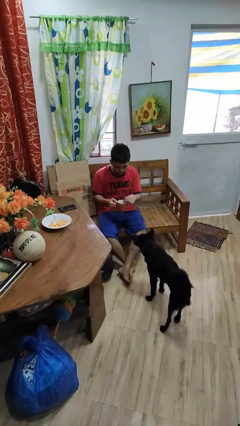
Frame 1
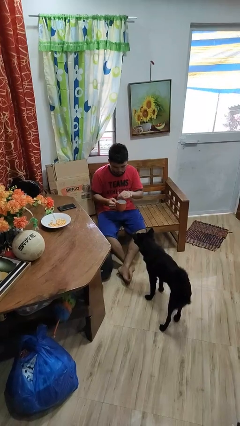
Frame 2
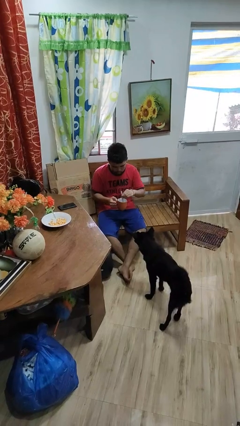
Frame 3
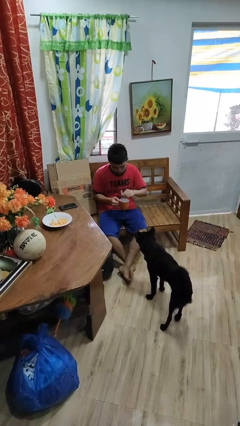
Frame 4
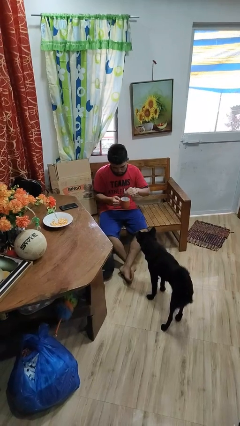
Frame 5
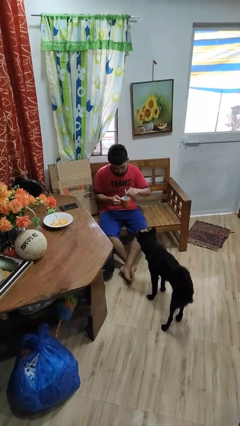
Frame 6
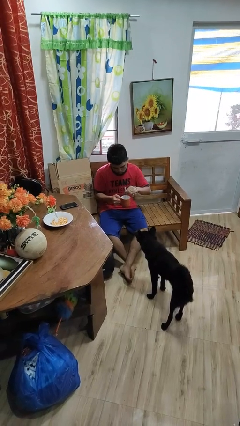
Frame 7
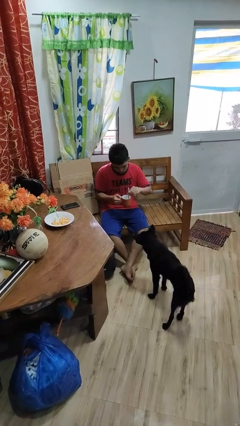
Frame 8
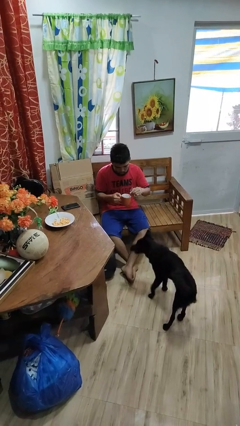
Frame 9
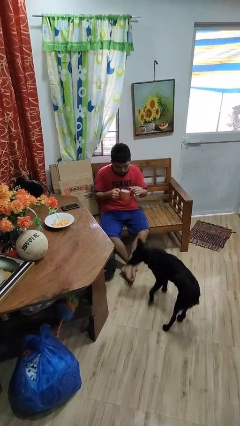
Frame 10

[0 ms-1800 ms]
person stirs mug

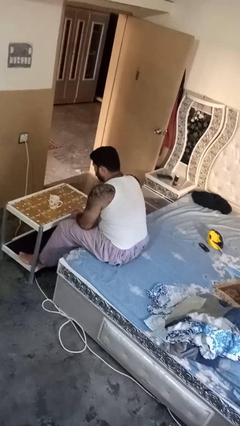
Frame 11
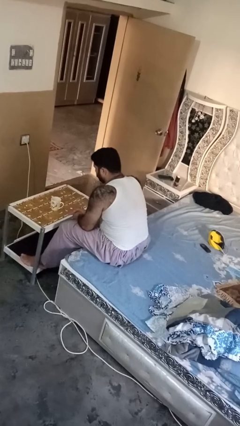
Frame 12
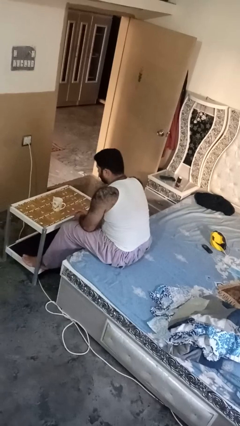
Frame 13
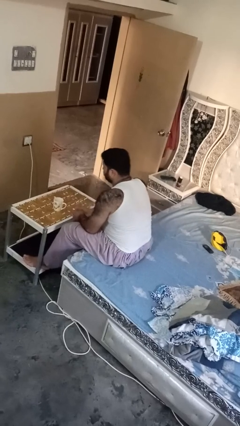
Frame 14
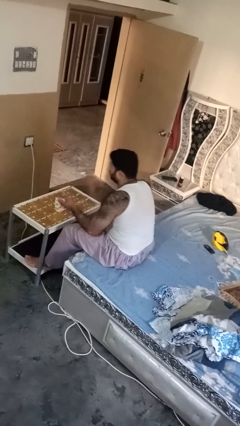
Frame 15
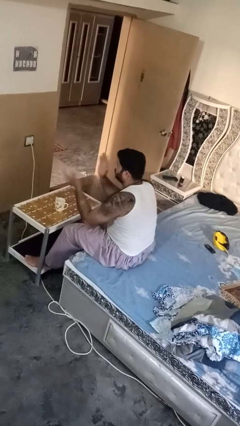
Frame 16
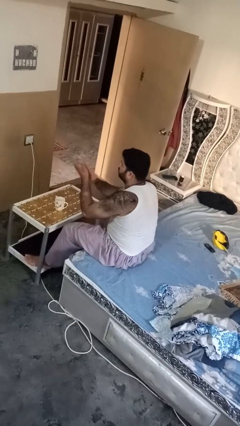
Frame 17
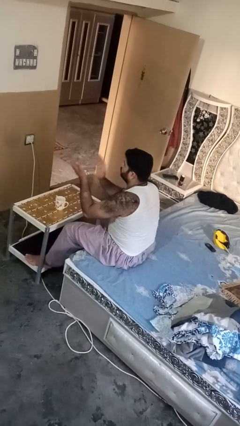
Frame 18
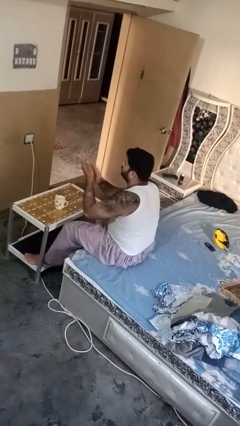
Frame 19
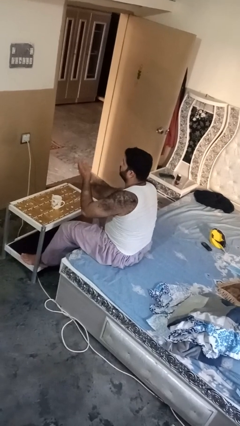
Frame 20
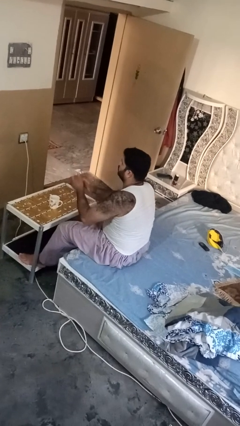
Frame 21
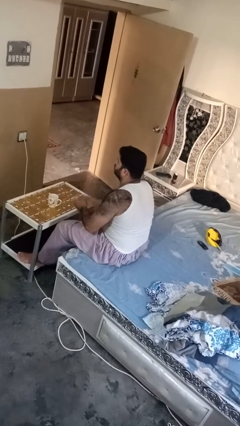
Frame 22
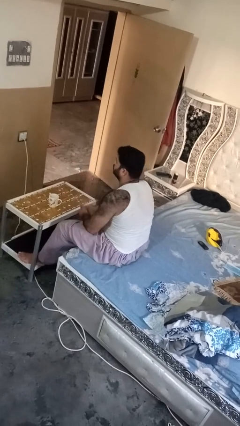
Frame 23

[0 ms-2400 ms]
person claps hands

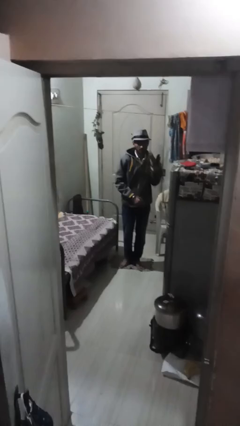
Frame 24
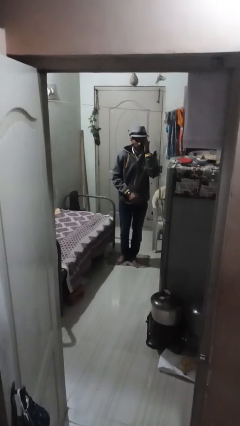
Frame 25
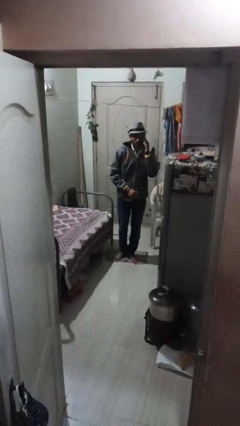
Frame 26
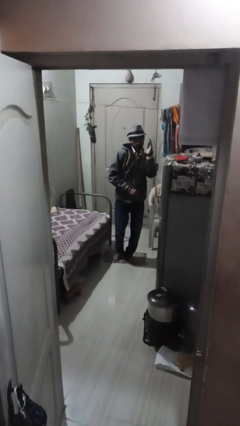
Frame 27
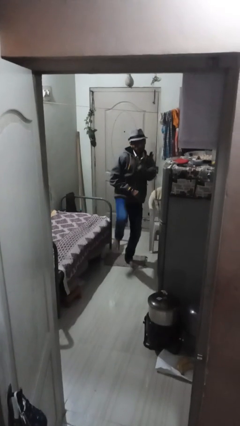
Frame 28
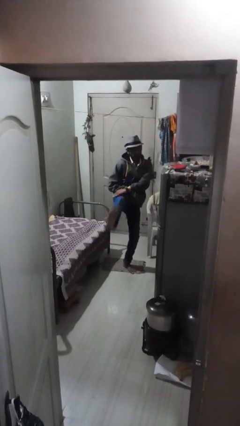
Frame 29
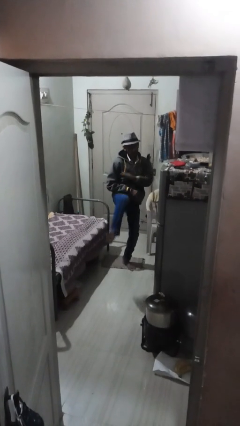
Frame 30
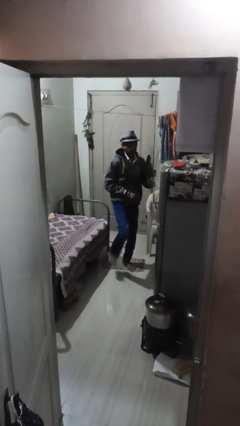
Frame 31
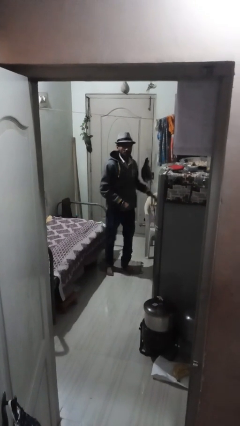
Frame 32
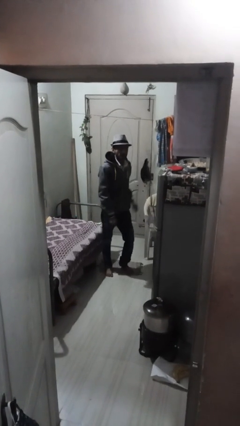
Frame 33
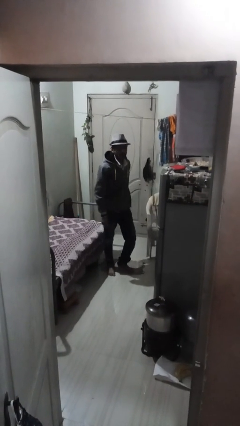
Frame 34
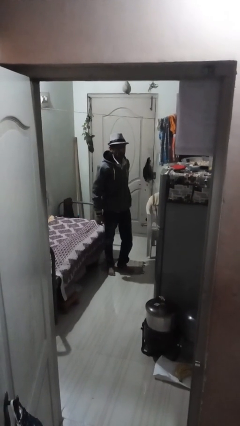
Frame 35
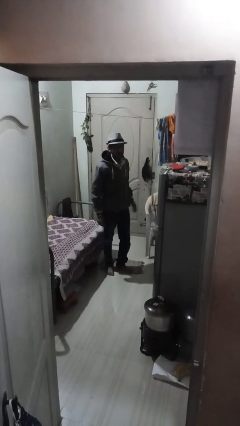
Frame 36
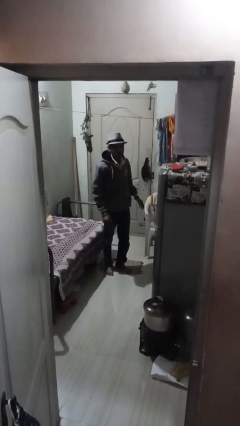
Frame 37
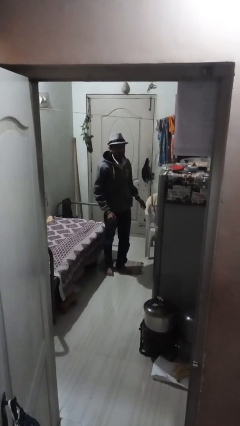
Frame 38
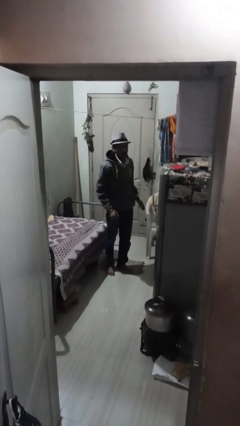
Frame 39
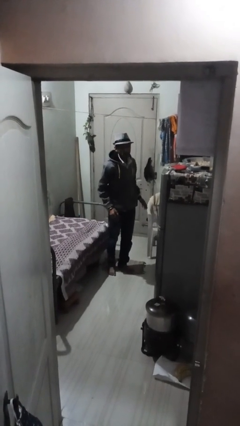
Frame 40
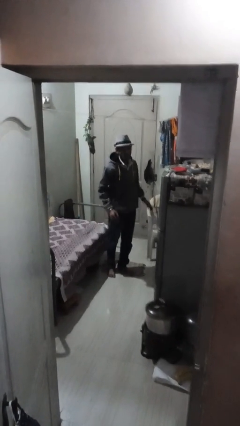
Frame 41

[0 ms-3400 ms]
person karate kicks

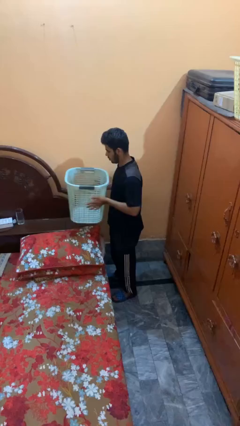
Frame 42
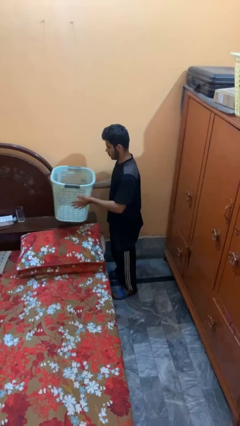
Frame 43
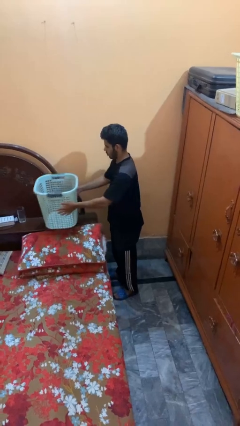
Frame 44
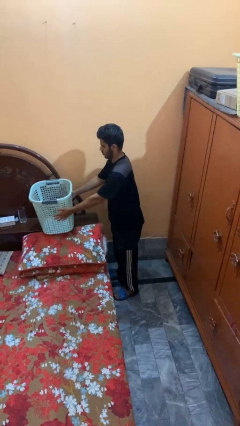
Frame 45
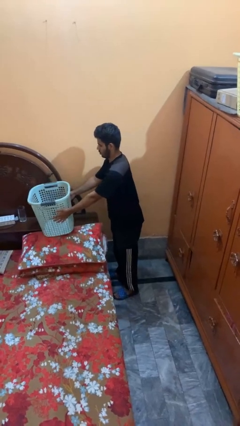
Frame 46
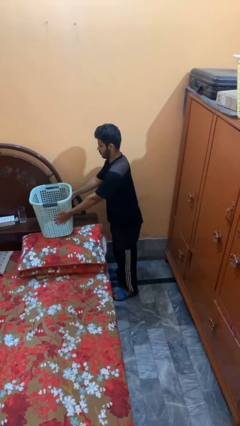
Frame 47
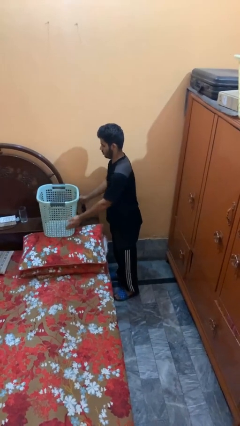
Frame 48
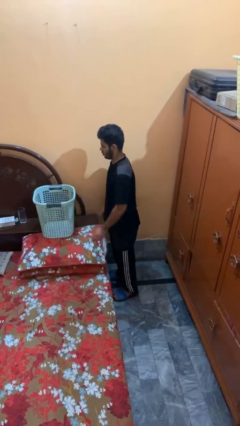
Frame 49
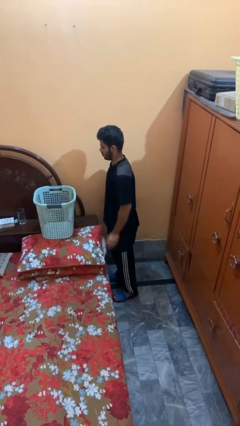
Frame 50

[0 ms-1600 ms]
person puts down object on bed

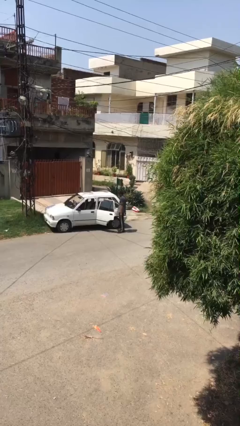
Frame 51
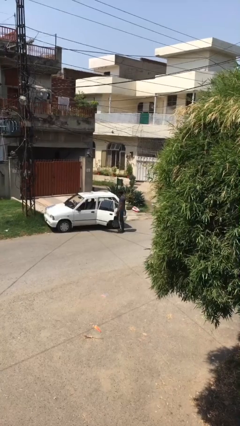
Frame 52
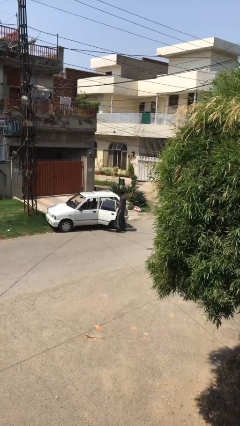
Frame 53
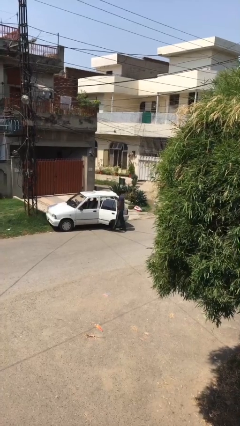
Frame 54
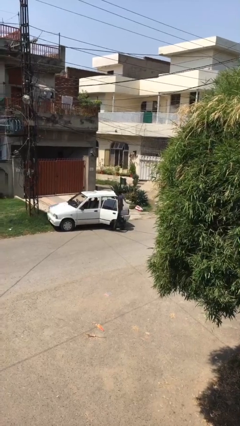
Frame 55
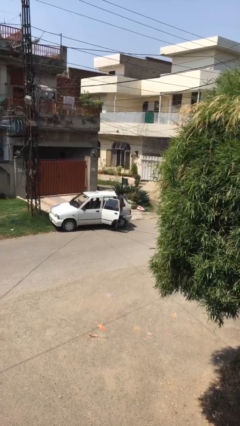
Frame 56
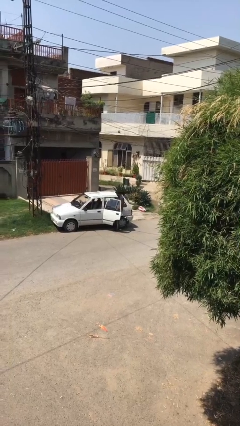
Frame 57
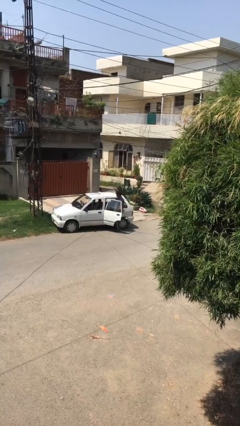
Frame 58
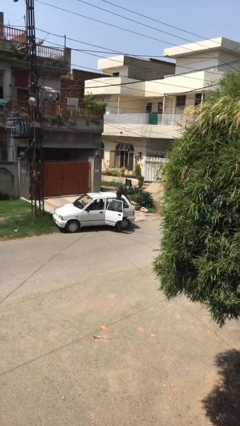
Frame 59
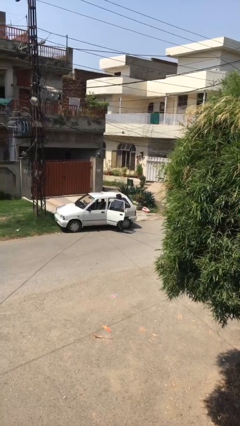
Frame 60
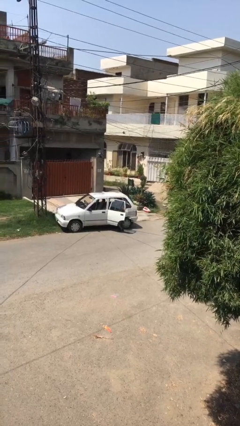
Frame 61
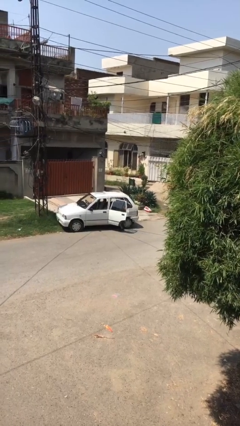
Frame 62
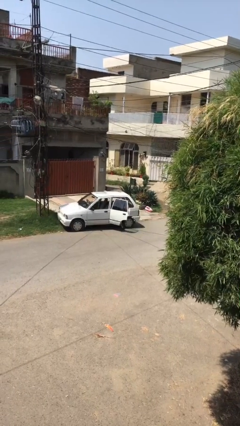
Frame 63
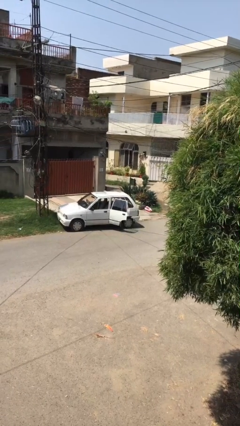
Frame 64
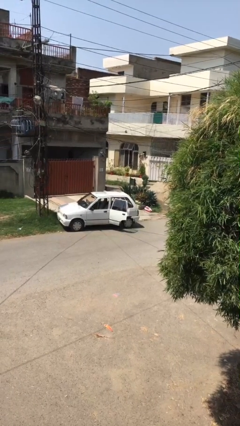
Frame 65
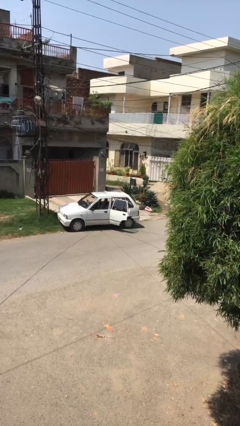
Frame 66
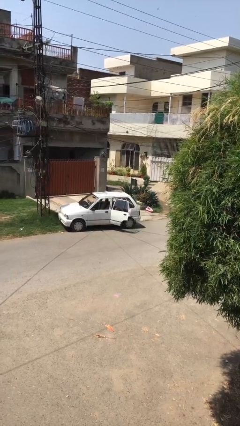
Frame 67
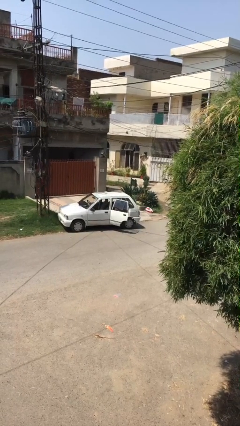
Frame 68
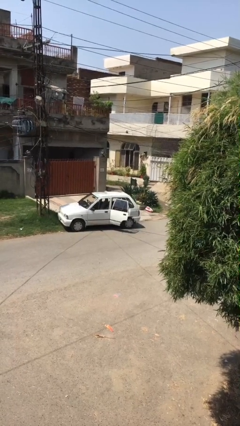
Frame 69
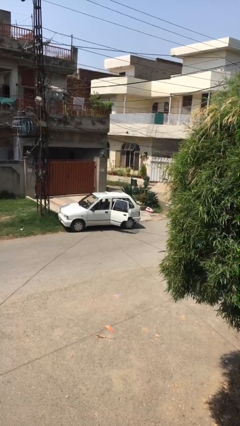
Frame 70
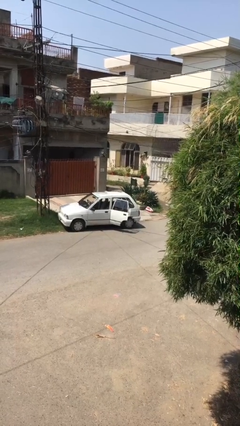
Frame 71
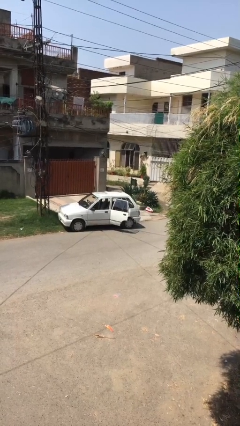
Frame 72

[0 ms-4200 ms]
person enters car

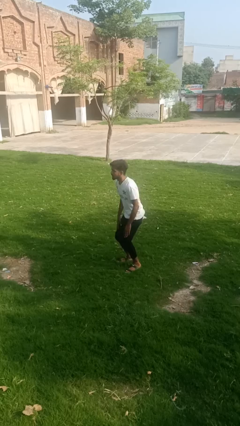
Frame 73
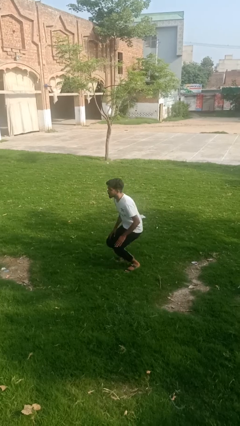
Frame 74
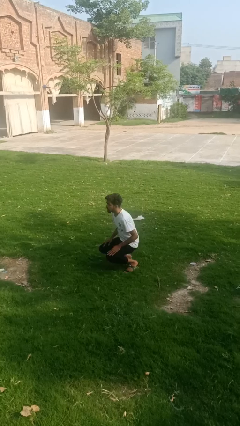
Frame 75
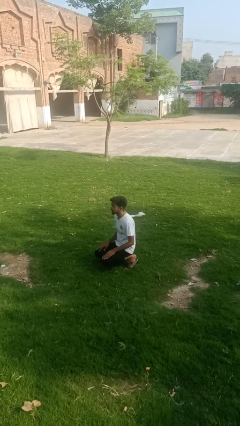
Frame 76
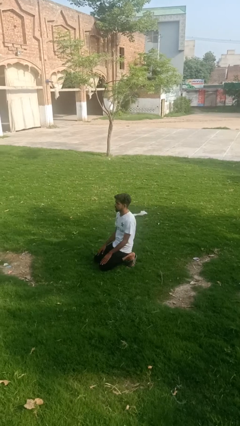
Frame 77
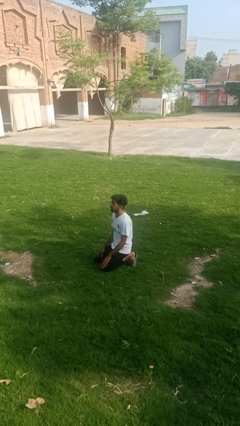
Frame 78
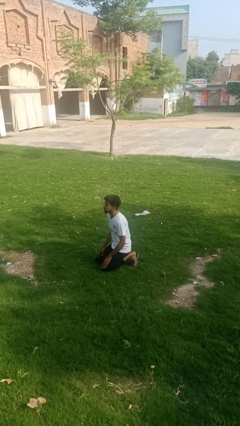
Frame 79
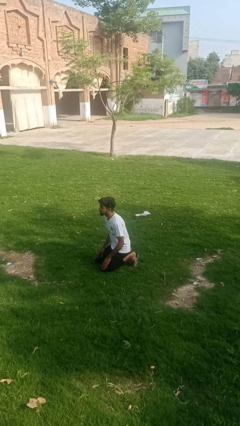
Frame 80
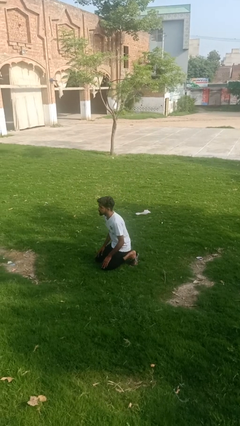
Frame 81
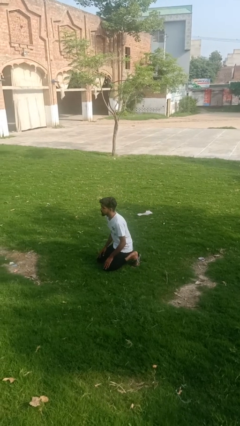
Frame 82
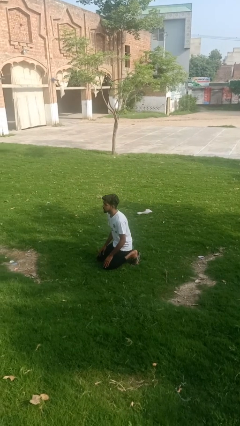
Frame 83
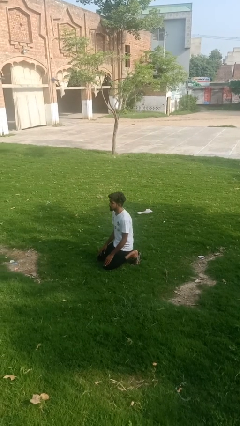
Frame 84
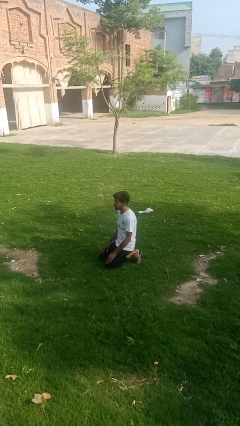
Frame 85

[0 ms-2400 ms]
person kneels

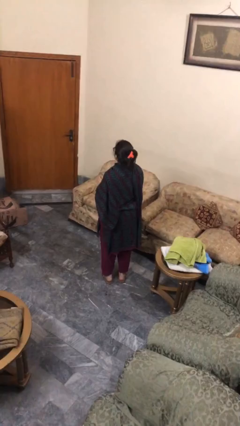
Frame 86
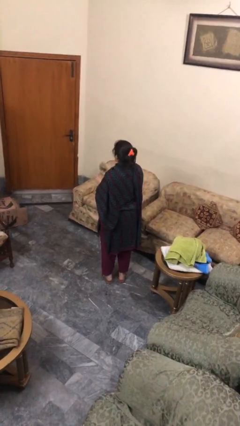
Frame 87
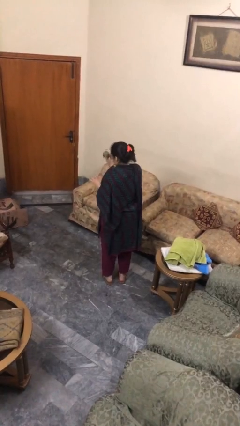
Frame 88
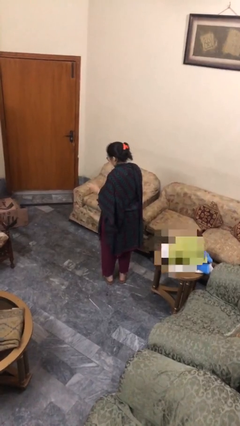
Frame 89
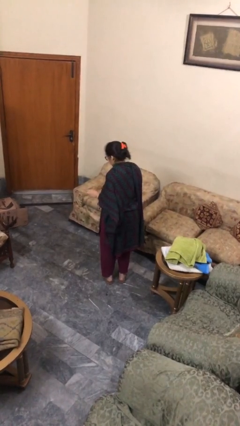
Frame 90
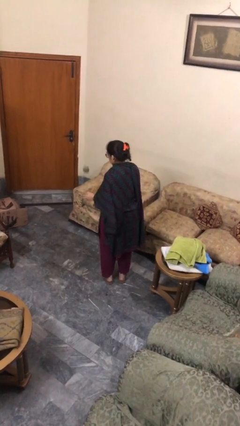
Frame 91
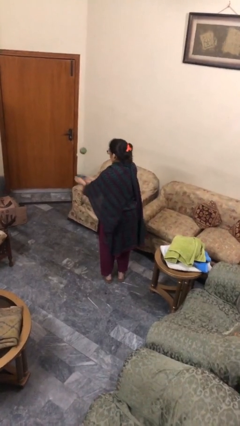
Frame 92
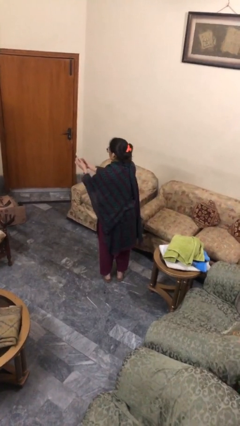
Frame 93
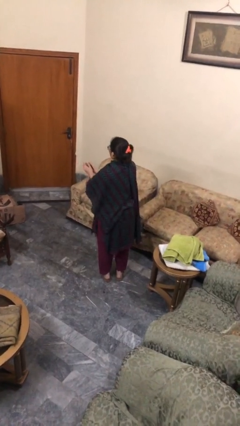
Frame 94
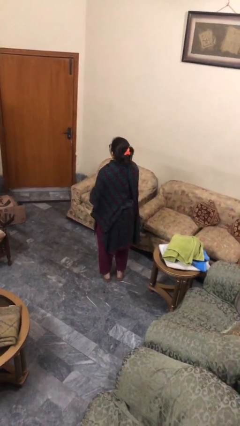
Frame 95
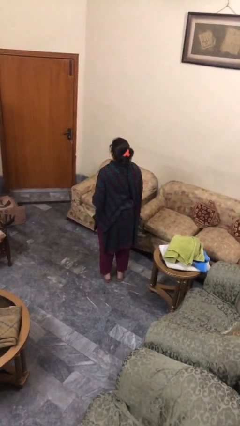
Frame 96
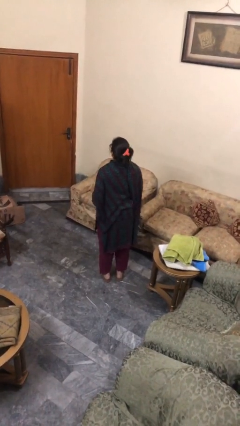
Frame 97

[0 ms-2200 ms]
person bounces ball on floor
